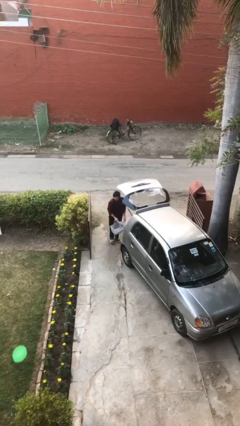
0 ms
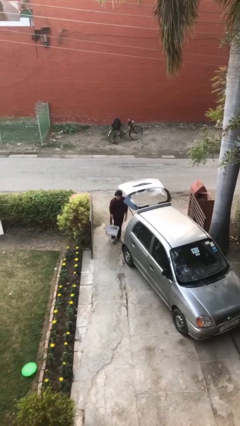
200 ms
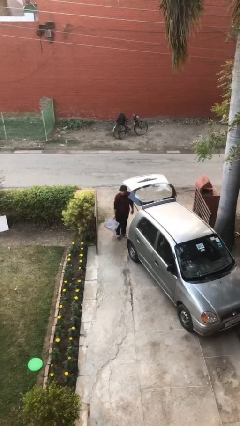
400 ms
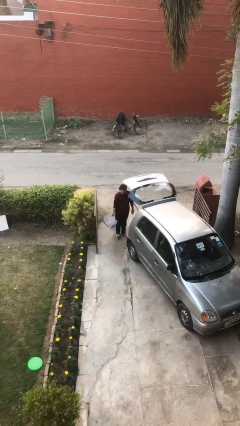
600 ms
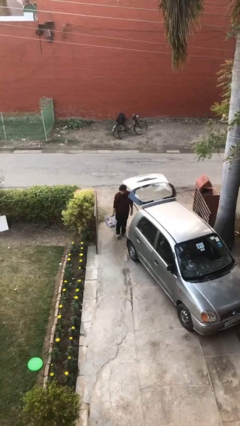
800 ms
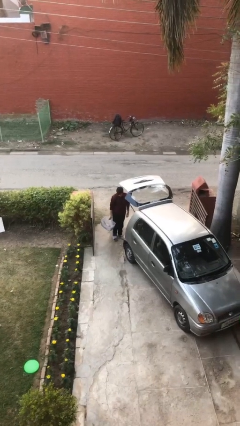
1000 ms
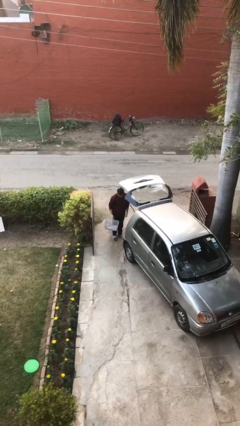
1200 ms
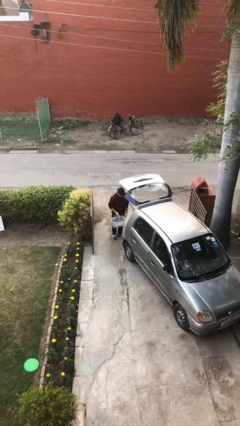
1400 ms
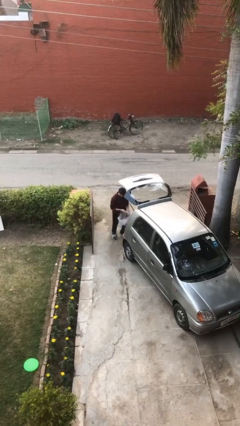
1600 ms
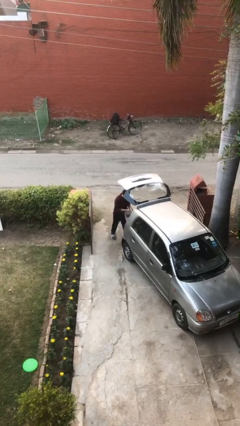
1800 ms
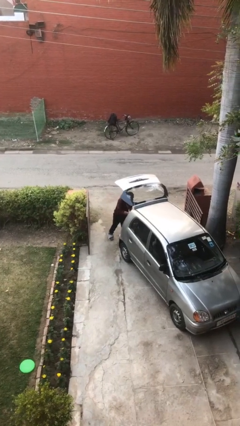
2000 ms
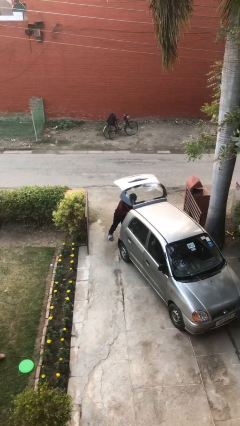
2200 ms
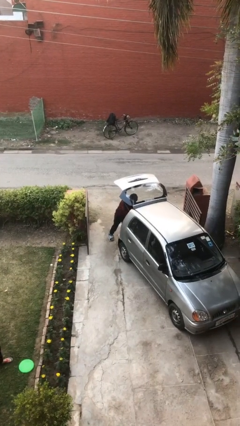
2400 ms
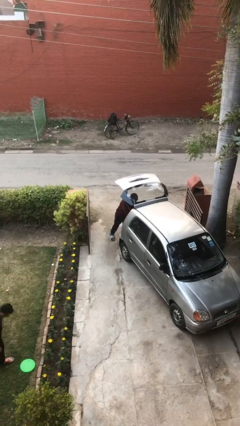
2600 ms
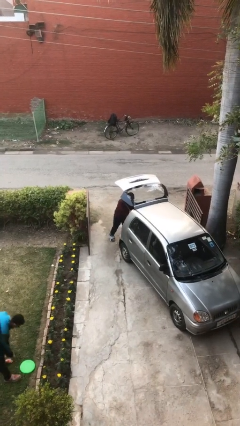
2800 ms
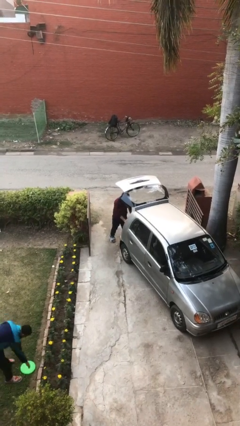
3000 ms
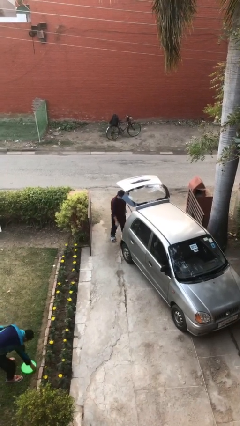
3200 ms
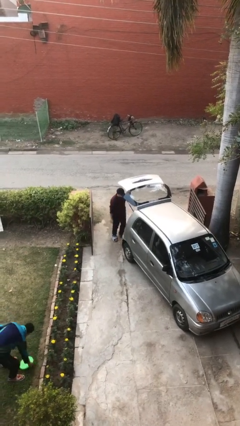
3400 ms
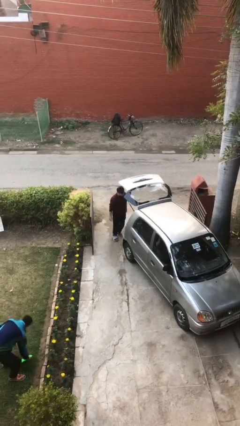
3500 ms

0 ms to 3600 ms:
person loads car

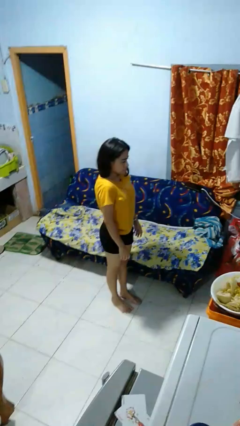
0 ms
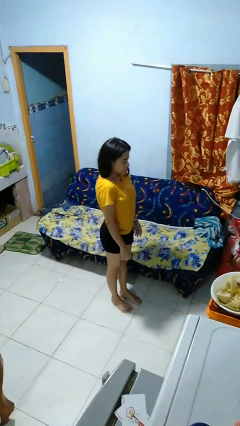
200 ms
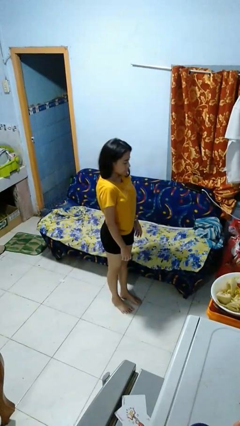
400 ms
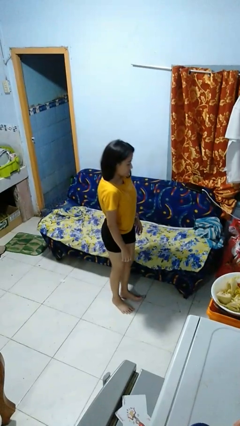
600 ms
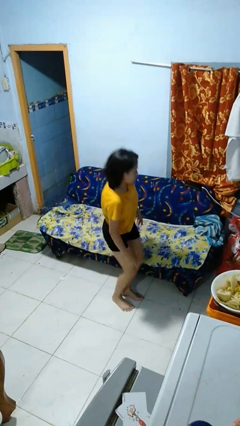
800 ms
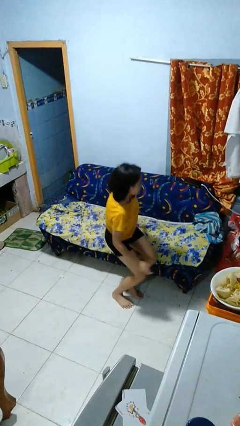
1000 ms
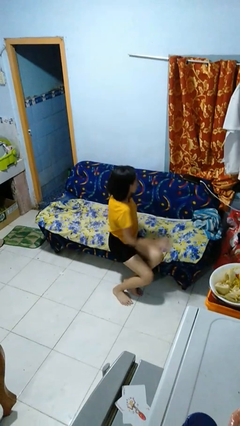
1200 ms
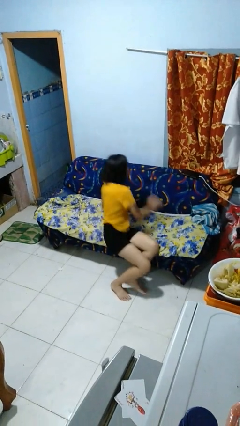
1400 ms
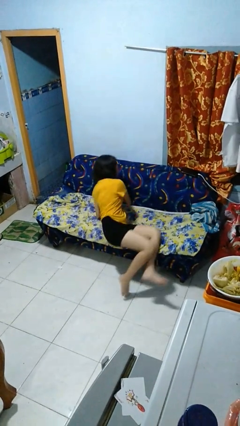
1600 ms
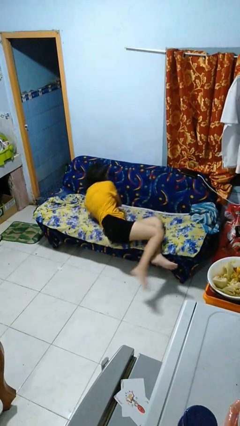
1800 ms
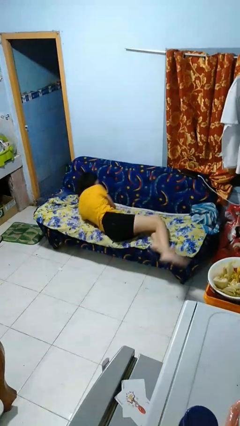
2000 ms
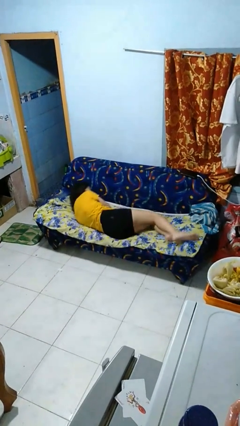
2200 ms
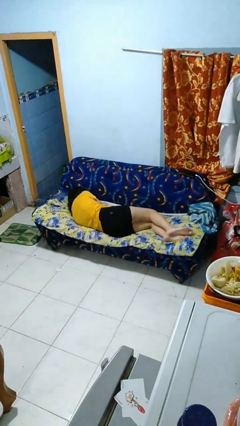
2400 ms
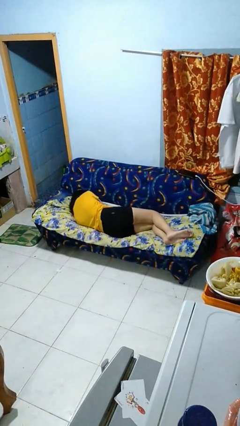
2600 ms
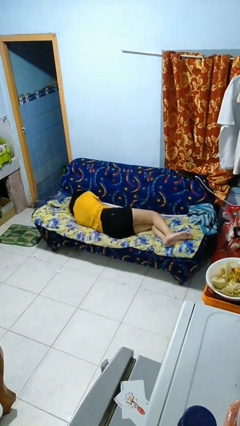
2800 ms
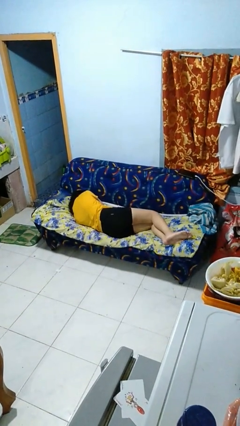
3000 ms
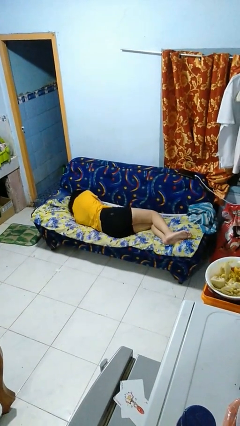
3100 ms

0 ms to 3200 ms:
person lies down on couch

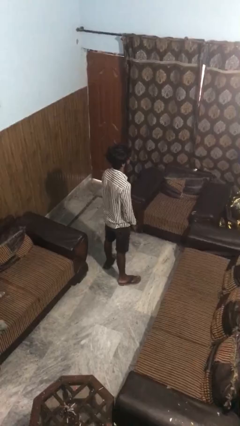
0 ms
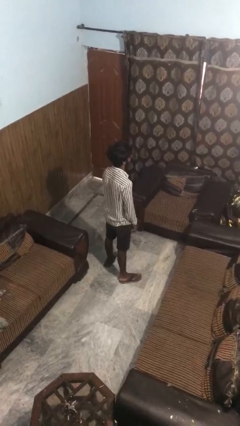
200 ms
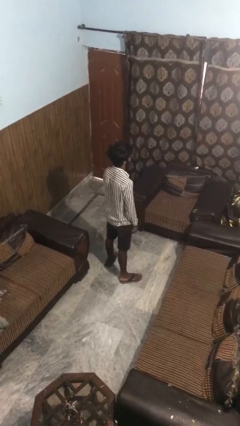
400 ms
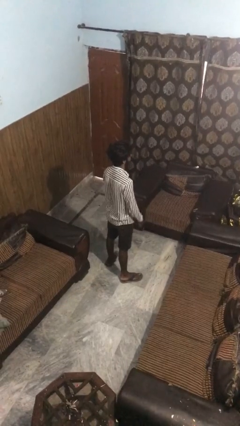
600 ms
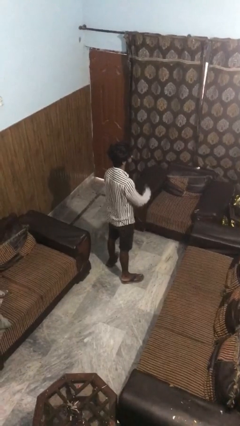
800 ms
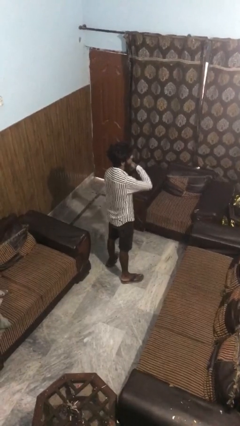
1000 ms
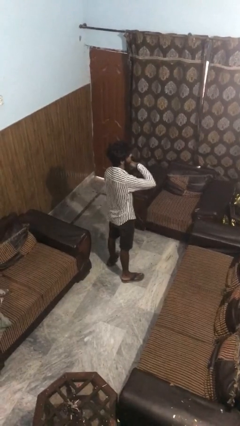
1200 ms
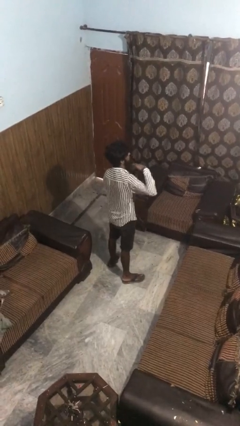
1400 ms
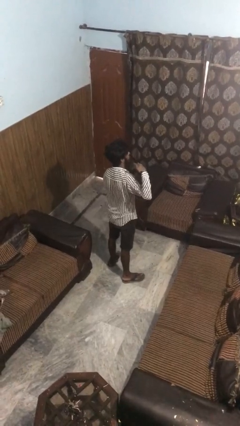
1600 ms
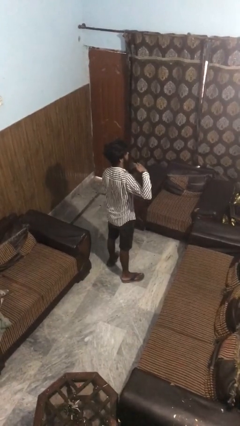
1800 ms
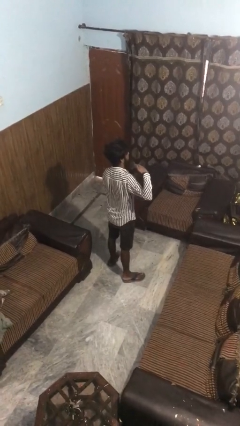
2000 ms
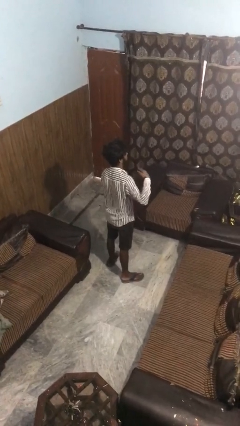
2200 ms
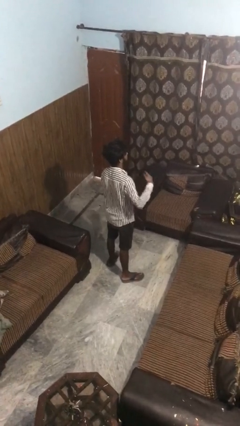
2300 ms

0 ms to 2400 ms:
person gestures cut

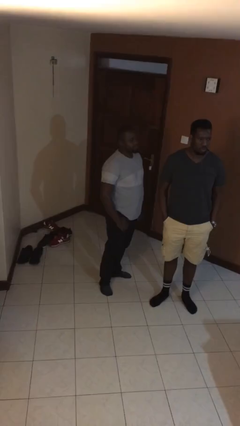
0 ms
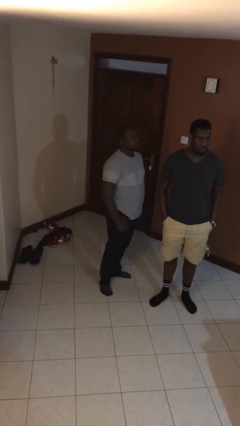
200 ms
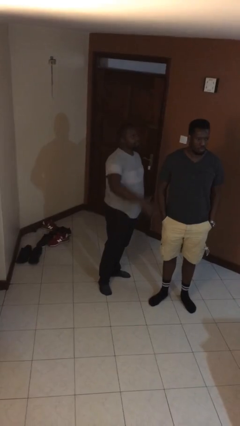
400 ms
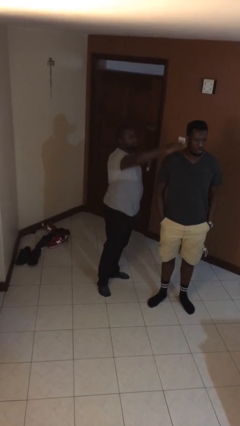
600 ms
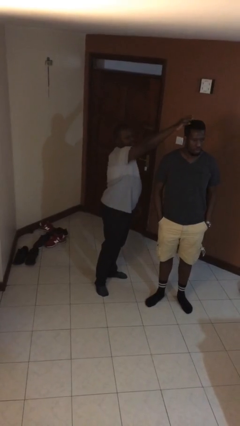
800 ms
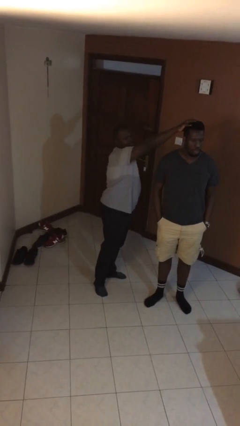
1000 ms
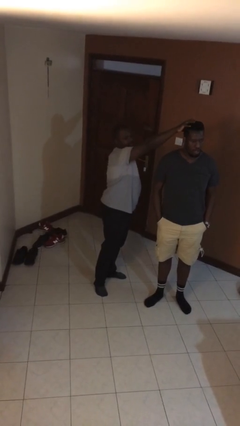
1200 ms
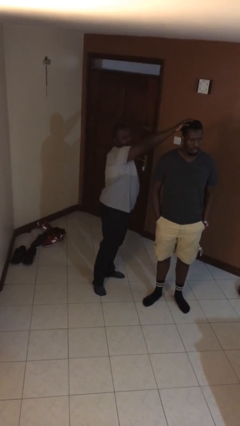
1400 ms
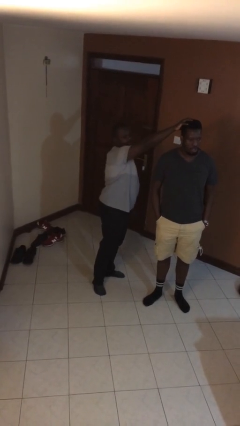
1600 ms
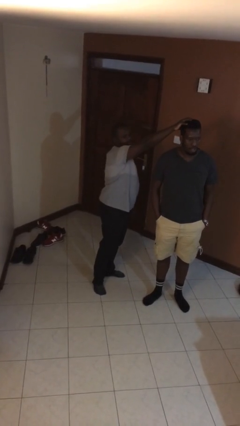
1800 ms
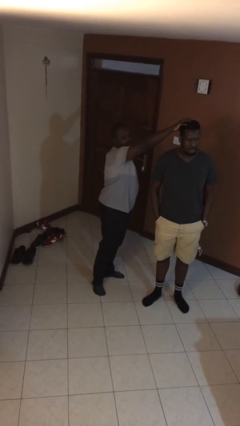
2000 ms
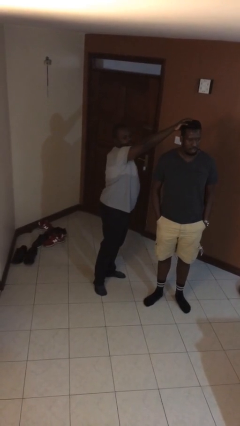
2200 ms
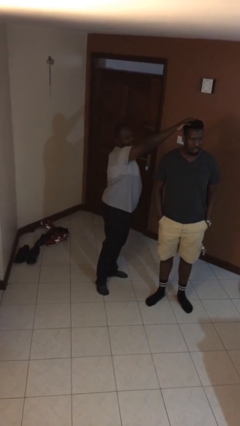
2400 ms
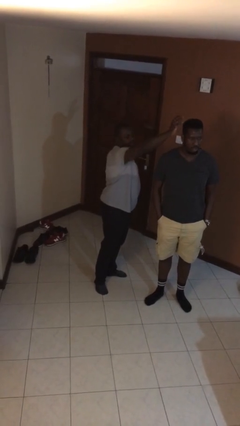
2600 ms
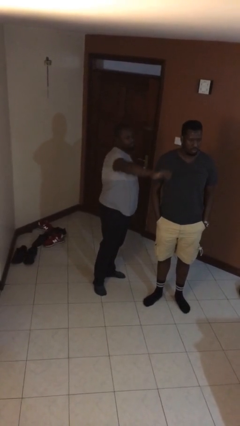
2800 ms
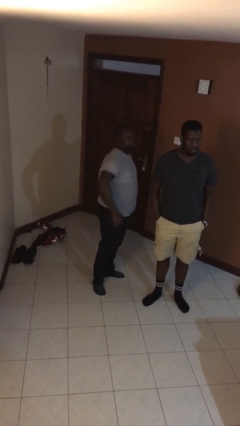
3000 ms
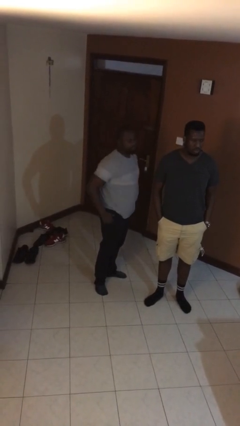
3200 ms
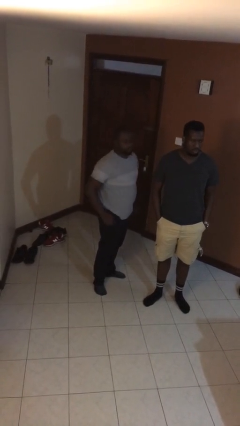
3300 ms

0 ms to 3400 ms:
person grabs person by hair

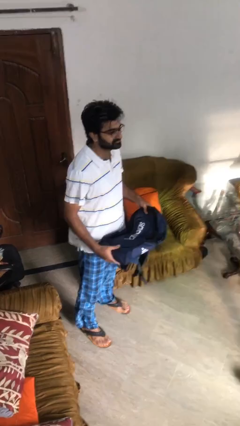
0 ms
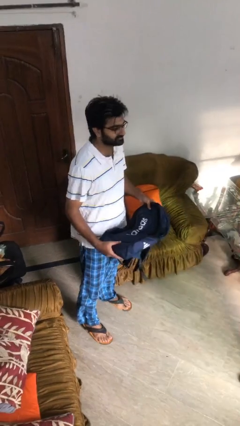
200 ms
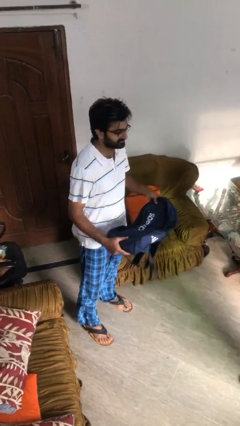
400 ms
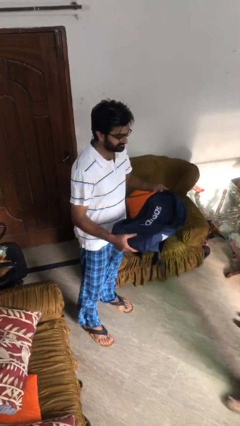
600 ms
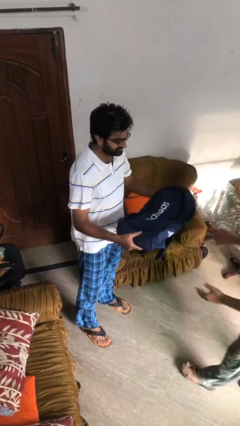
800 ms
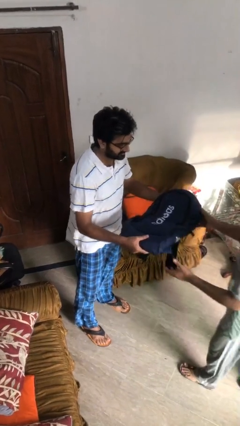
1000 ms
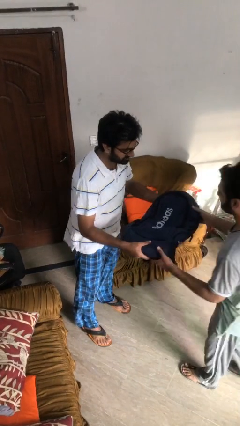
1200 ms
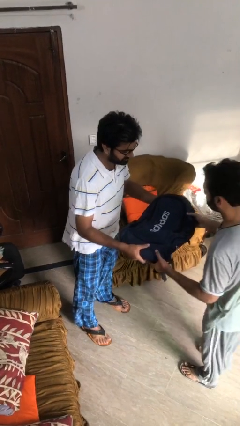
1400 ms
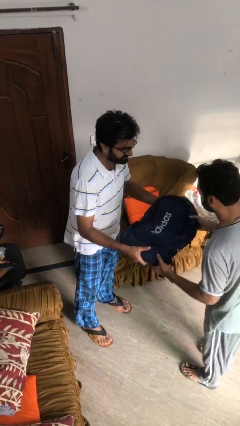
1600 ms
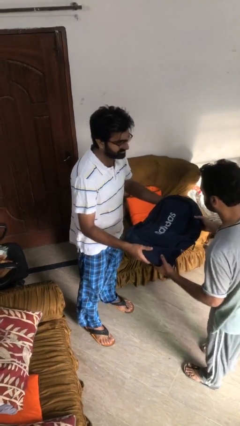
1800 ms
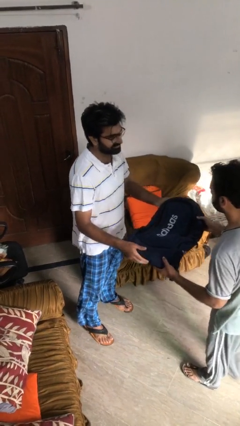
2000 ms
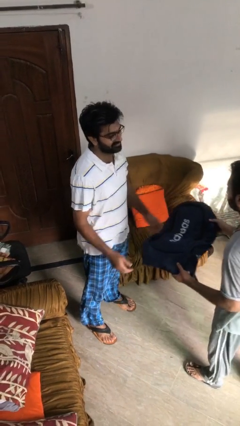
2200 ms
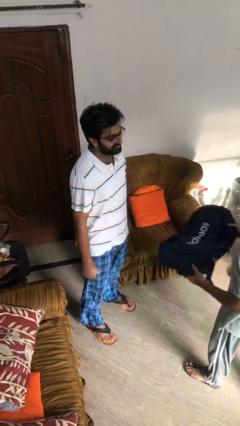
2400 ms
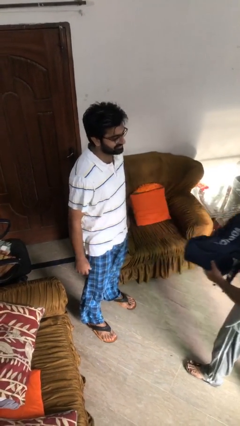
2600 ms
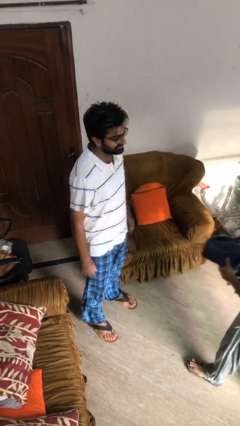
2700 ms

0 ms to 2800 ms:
person transfers object to person

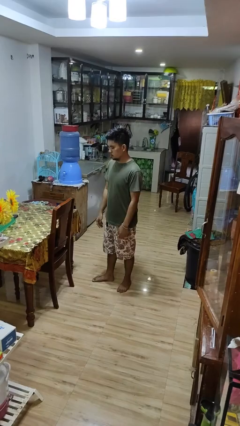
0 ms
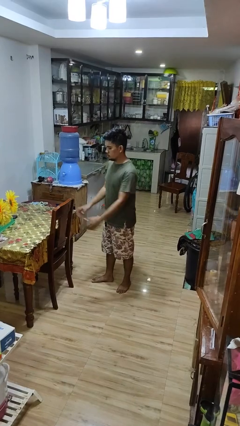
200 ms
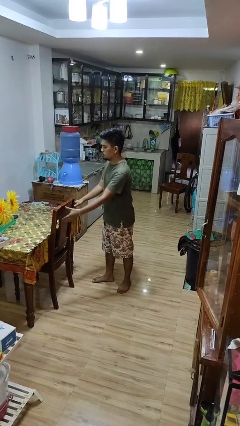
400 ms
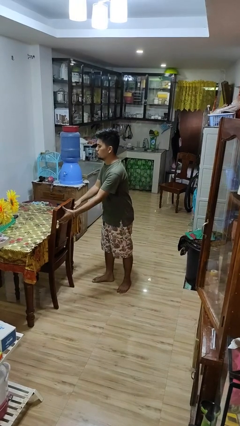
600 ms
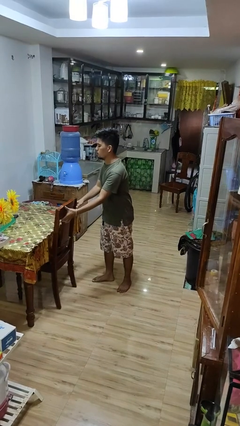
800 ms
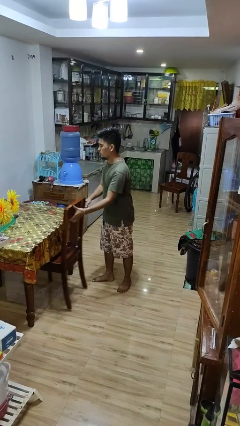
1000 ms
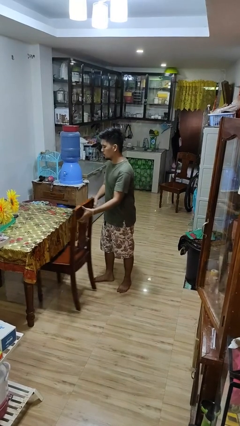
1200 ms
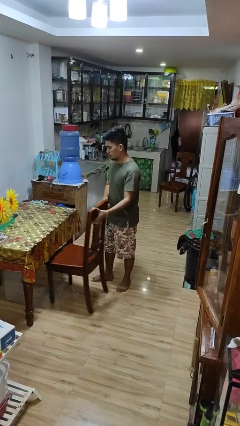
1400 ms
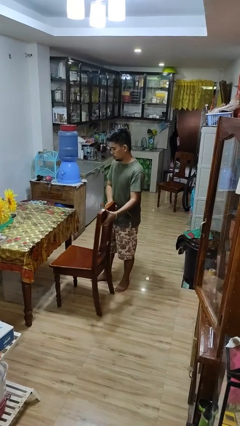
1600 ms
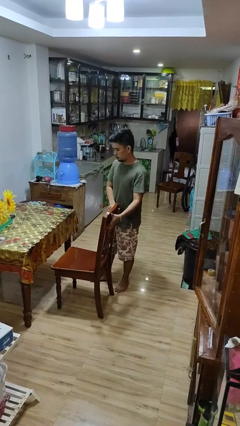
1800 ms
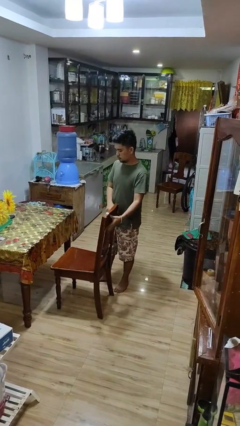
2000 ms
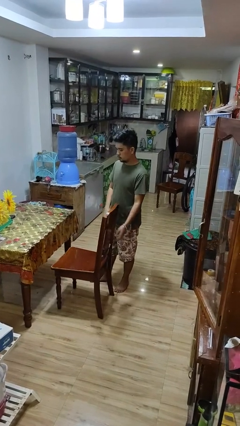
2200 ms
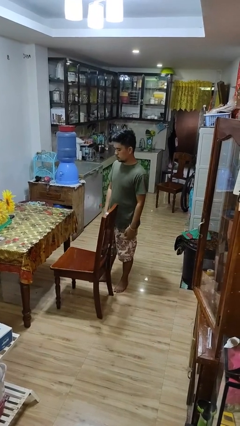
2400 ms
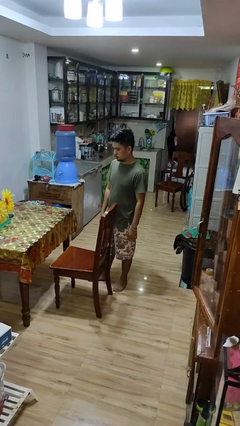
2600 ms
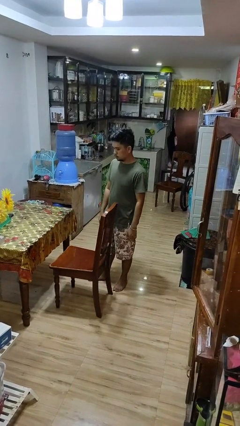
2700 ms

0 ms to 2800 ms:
person pulls out chair
